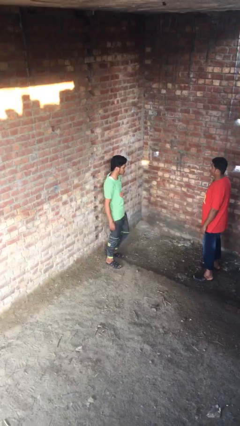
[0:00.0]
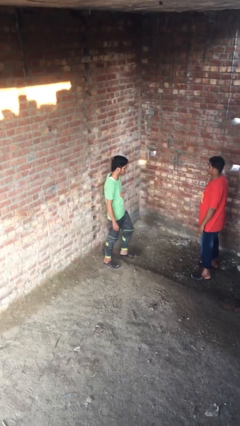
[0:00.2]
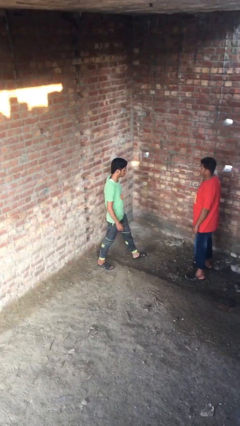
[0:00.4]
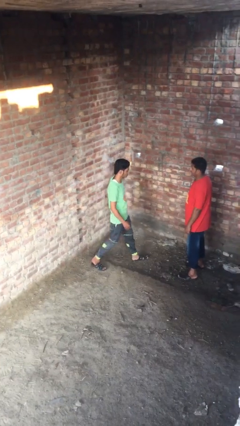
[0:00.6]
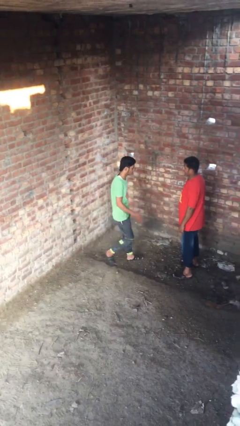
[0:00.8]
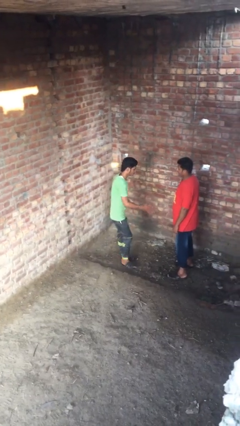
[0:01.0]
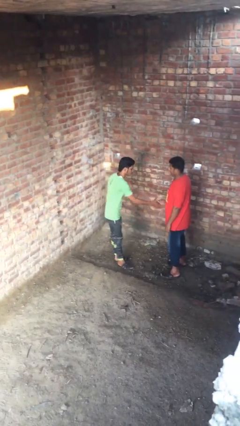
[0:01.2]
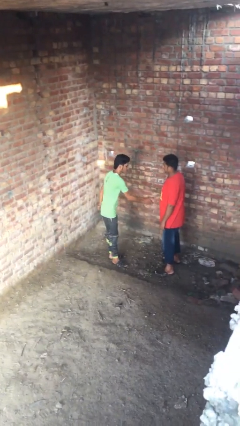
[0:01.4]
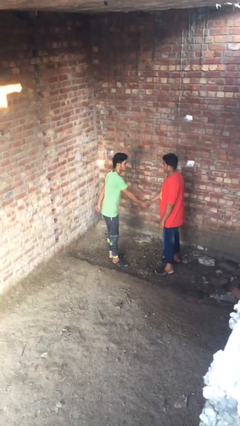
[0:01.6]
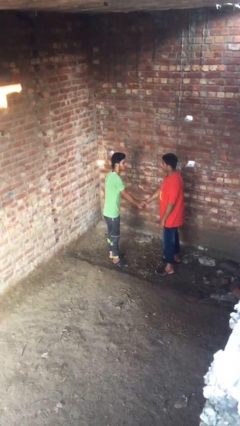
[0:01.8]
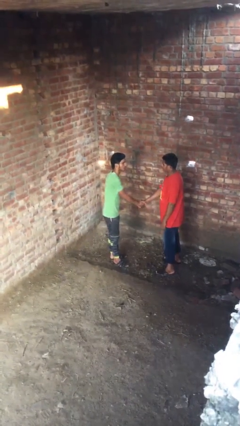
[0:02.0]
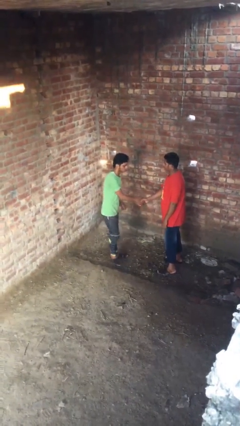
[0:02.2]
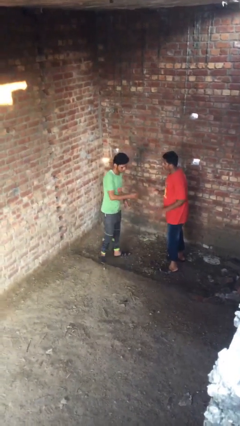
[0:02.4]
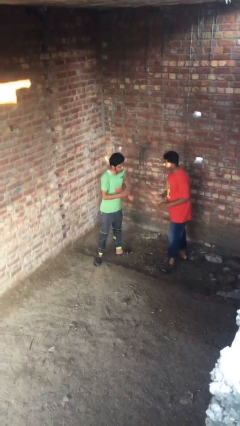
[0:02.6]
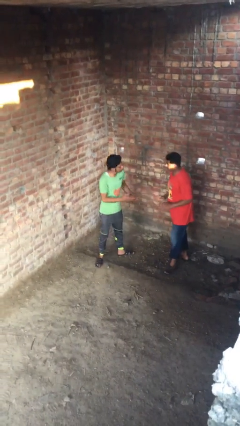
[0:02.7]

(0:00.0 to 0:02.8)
person shakes hand

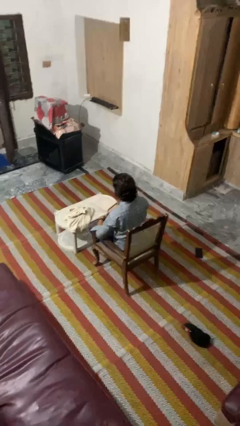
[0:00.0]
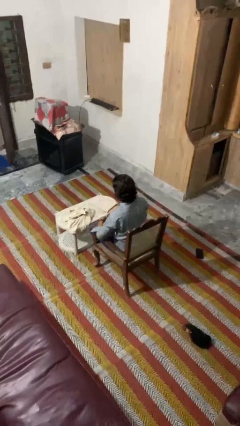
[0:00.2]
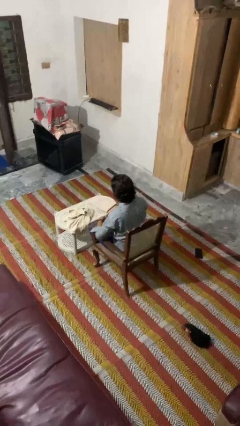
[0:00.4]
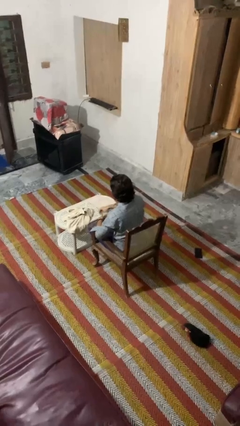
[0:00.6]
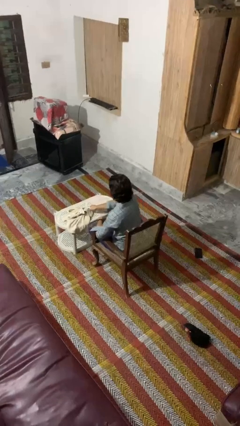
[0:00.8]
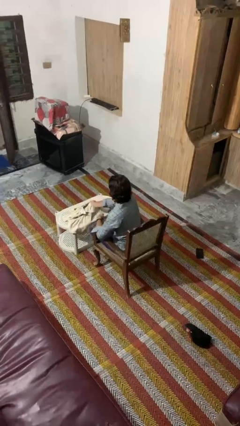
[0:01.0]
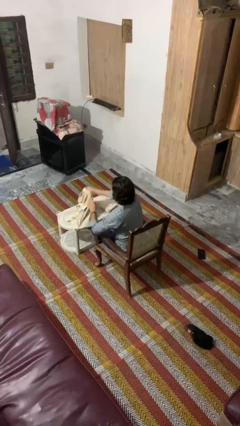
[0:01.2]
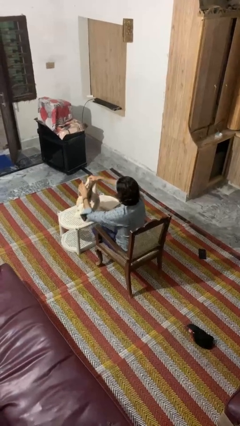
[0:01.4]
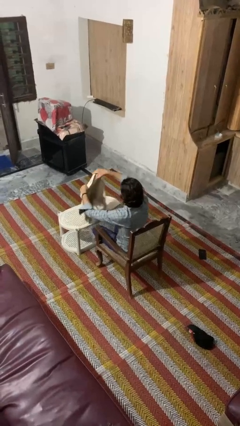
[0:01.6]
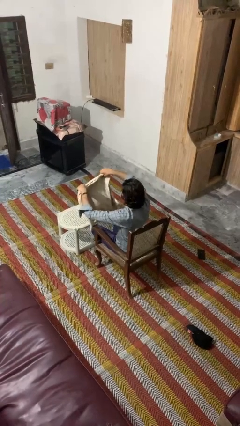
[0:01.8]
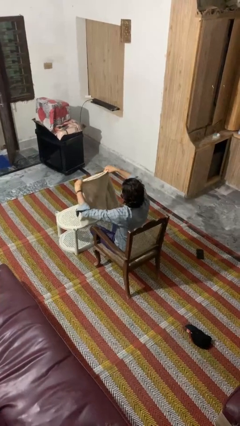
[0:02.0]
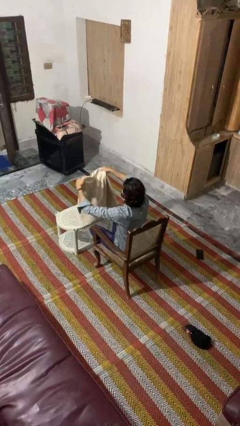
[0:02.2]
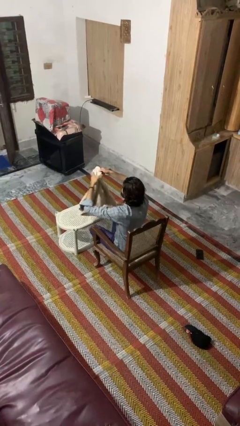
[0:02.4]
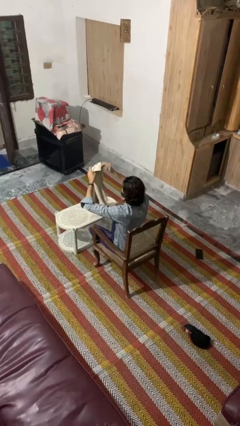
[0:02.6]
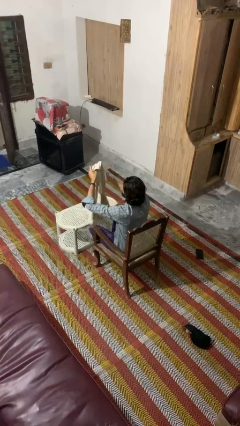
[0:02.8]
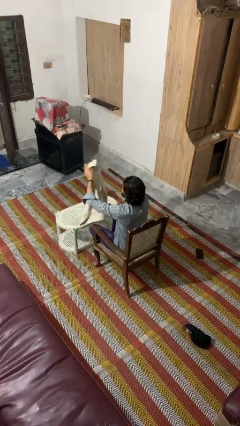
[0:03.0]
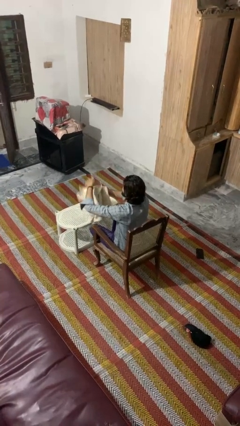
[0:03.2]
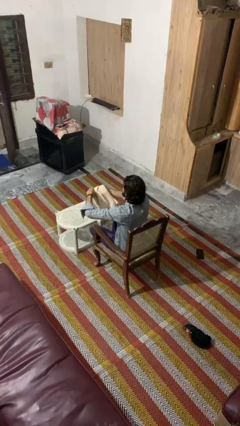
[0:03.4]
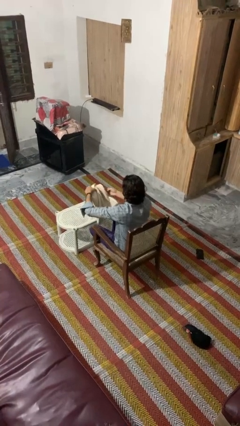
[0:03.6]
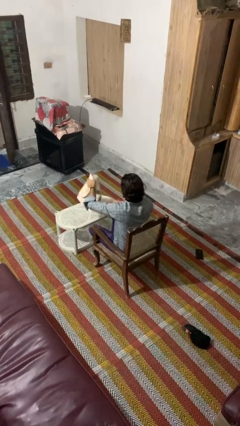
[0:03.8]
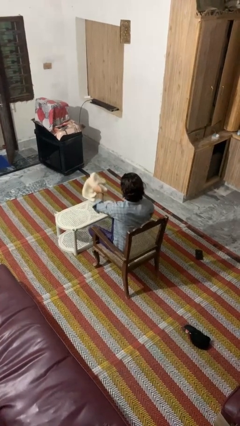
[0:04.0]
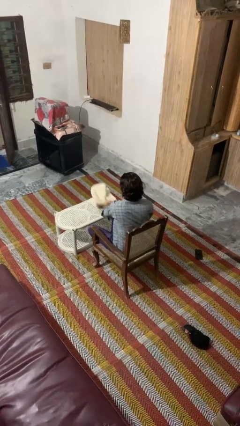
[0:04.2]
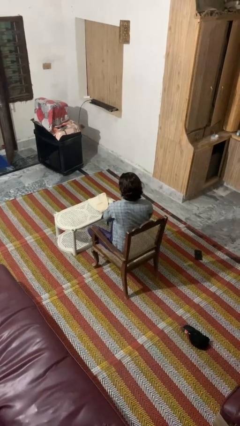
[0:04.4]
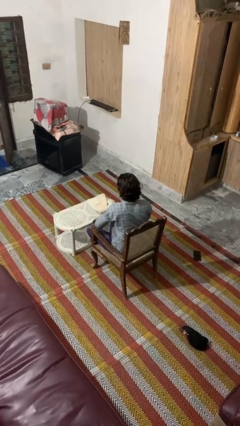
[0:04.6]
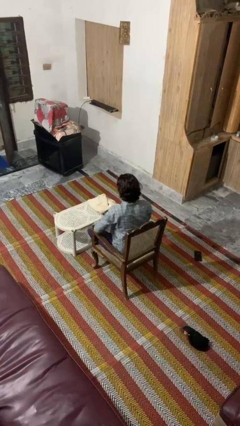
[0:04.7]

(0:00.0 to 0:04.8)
person folds towel

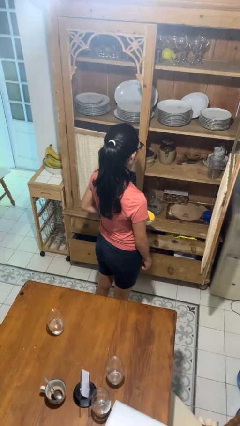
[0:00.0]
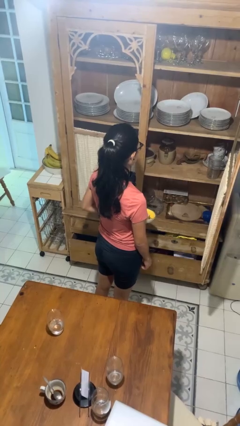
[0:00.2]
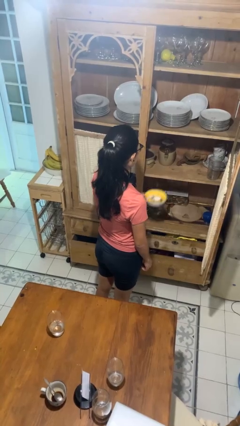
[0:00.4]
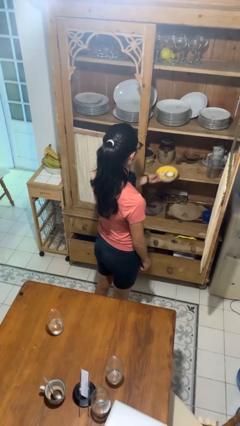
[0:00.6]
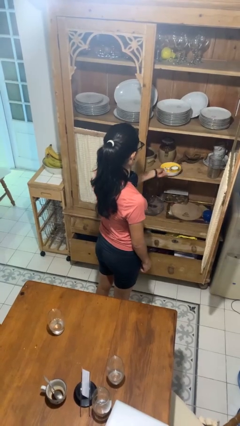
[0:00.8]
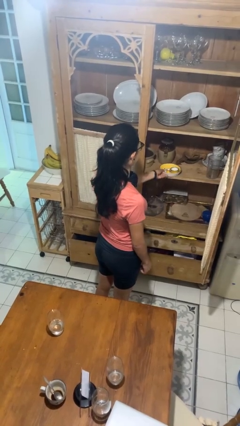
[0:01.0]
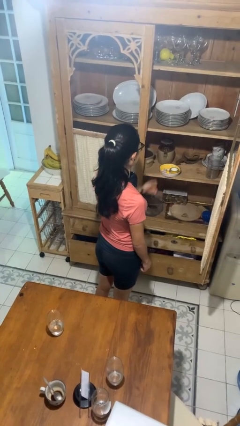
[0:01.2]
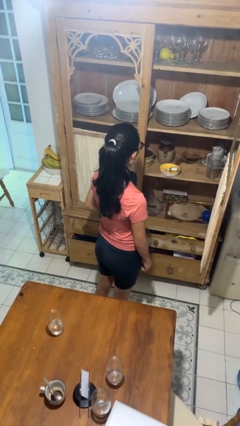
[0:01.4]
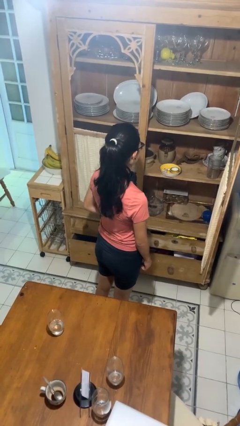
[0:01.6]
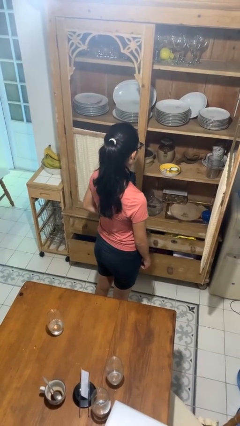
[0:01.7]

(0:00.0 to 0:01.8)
person puts object in cabinet

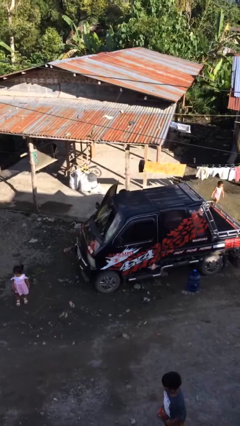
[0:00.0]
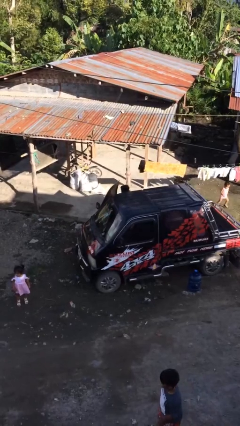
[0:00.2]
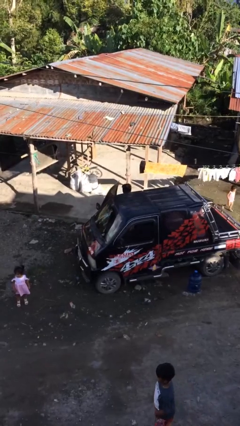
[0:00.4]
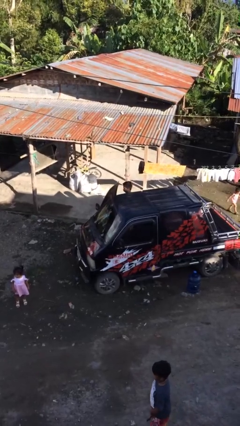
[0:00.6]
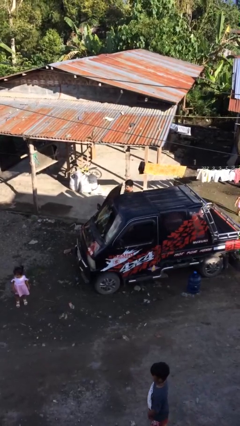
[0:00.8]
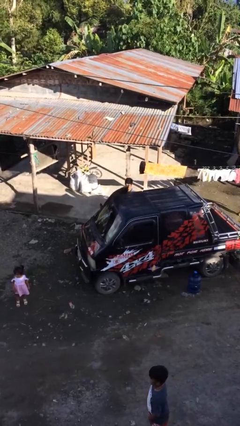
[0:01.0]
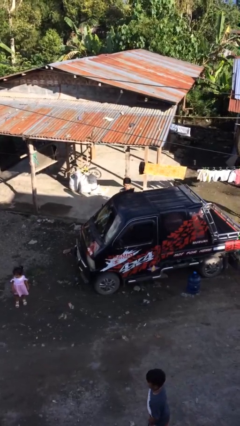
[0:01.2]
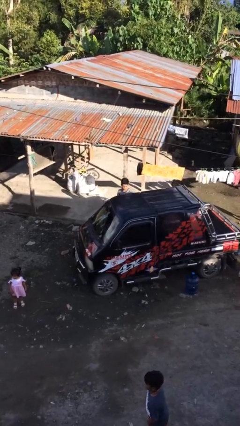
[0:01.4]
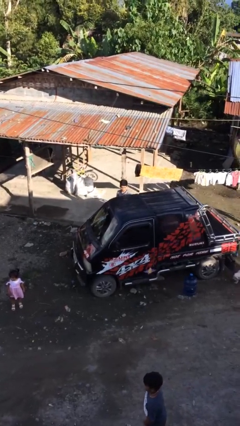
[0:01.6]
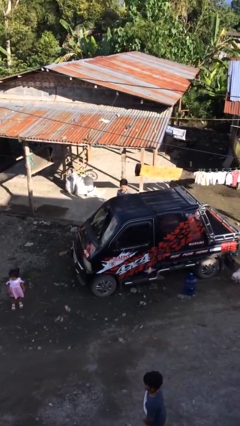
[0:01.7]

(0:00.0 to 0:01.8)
person exits car

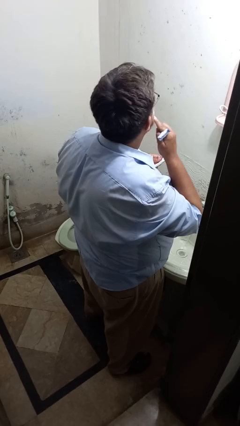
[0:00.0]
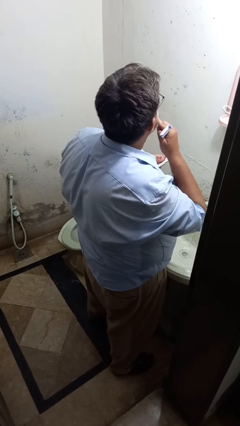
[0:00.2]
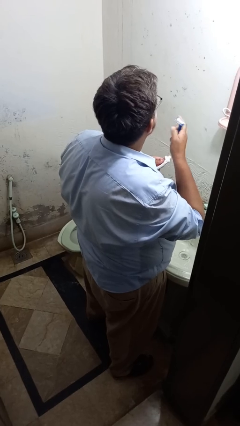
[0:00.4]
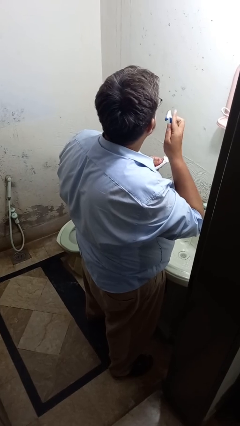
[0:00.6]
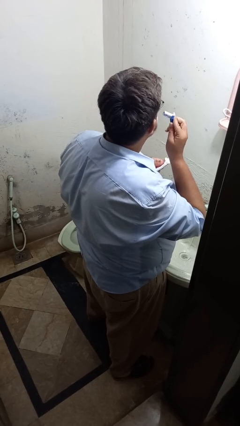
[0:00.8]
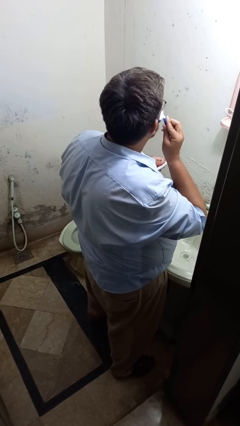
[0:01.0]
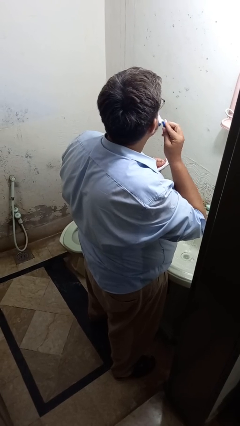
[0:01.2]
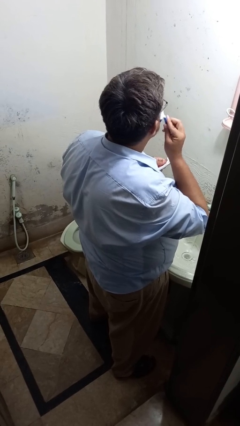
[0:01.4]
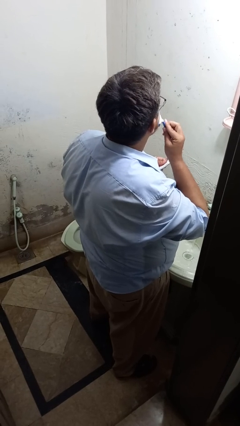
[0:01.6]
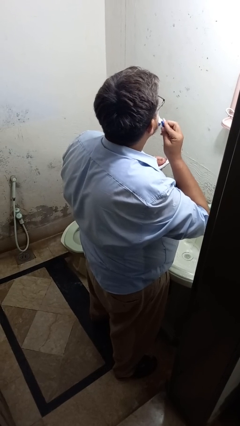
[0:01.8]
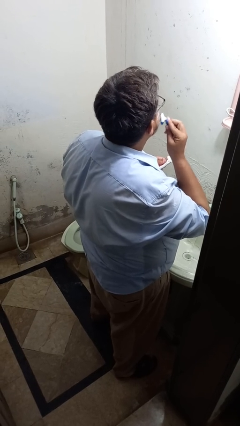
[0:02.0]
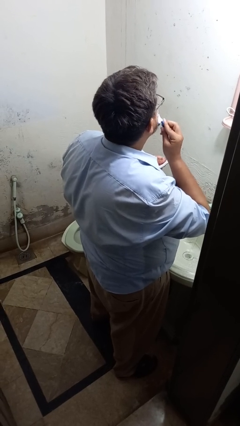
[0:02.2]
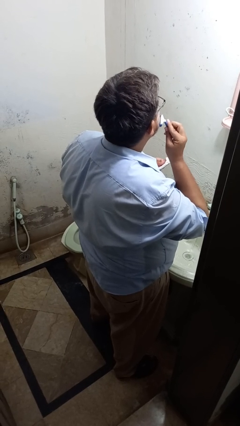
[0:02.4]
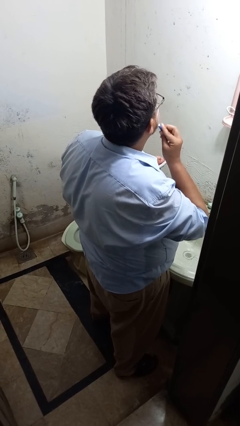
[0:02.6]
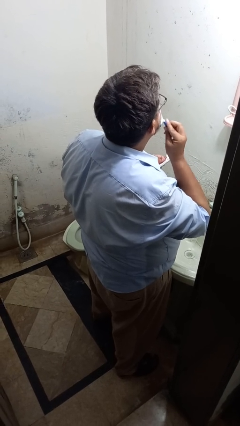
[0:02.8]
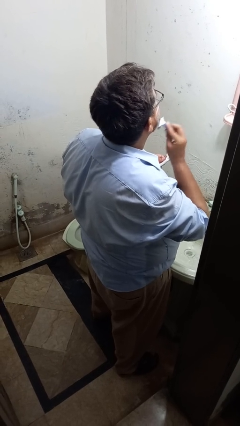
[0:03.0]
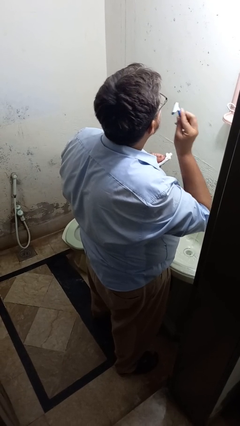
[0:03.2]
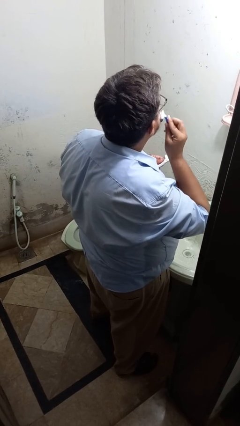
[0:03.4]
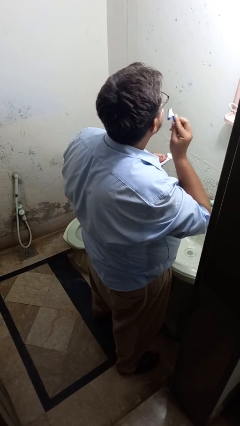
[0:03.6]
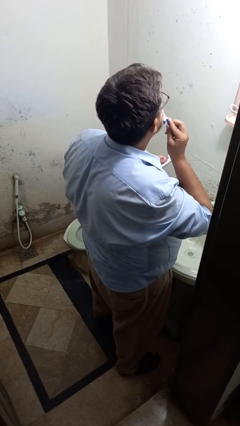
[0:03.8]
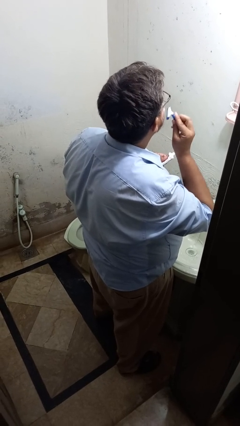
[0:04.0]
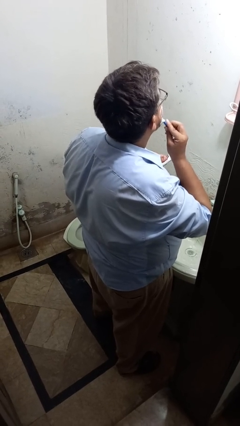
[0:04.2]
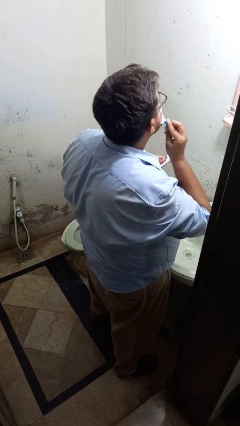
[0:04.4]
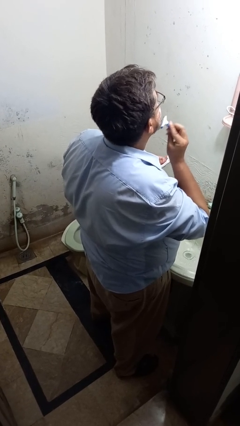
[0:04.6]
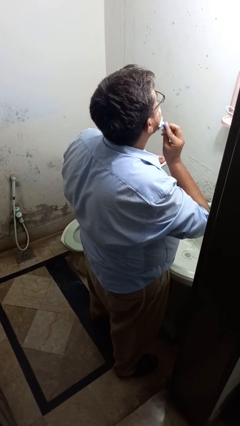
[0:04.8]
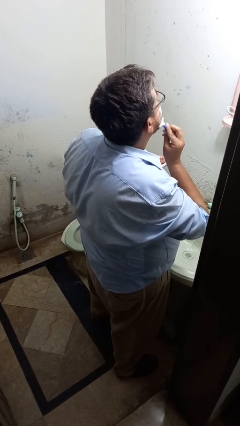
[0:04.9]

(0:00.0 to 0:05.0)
person shaves face

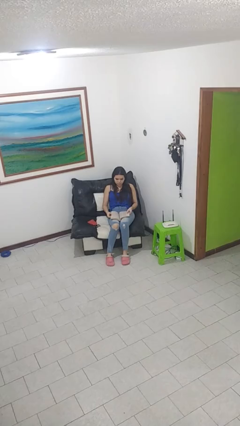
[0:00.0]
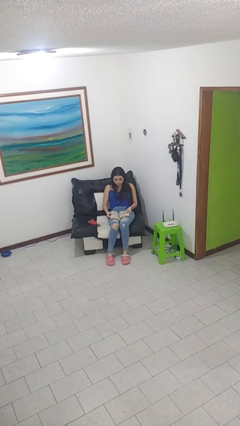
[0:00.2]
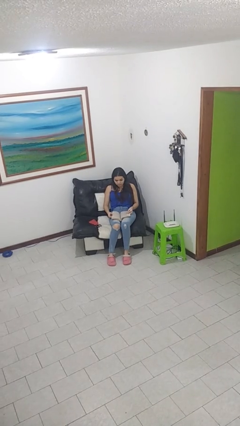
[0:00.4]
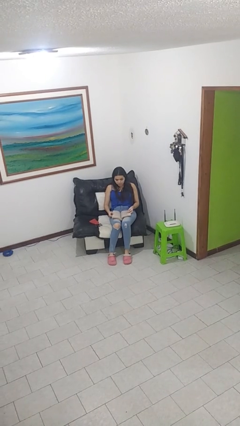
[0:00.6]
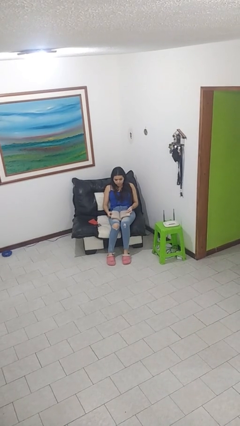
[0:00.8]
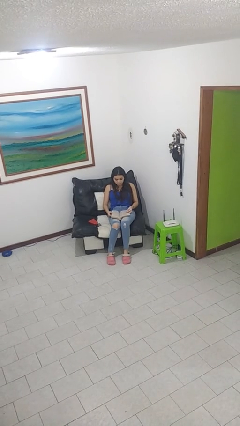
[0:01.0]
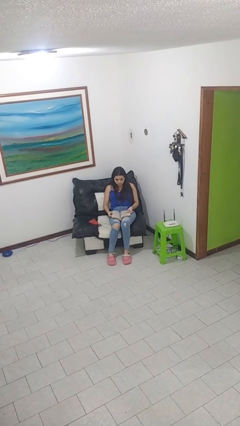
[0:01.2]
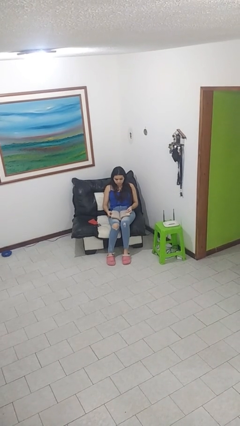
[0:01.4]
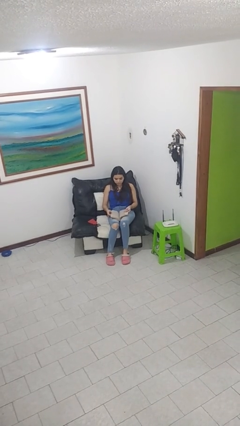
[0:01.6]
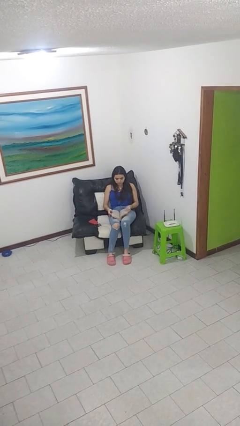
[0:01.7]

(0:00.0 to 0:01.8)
person reads book
